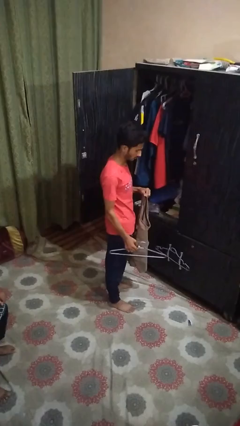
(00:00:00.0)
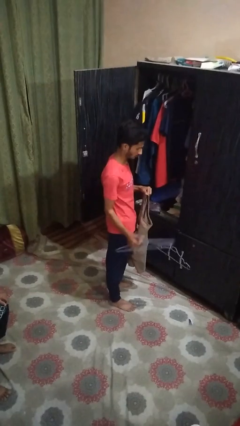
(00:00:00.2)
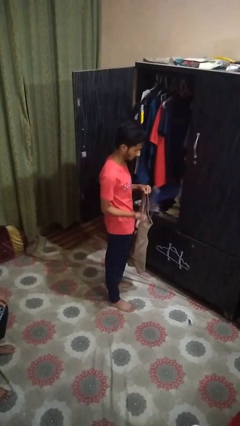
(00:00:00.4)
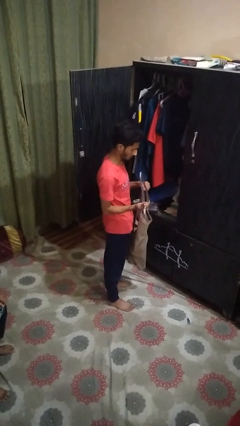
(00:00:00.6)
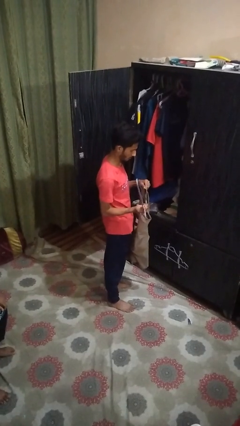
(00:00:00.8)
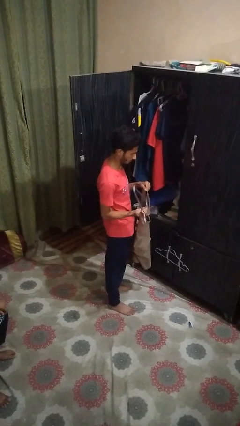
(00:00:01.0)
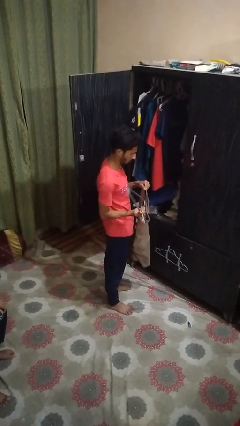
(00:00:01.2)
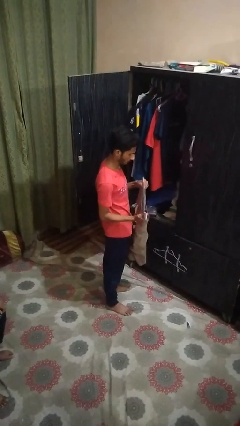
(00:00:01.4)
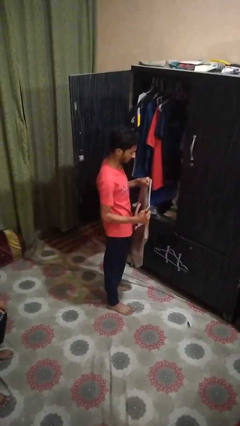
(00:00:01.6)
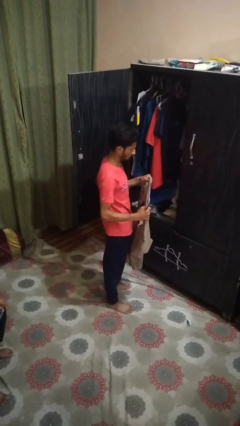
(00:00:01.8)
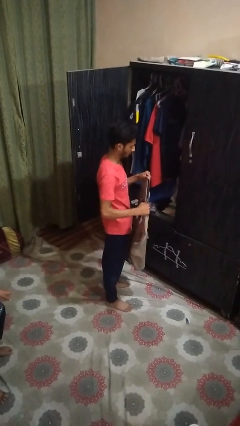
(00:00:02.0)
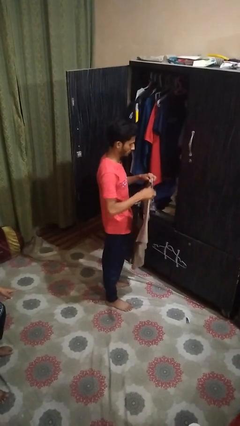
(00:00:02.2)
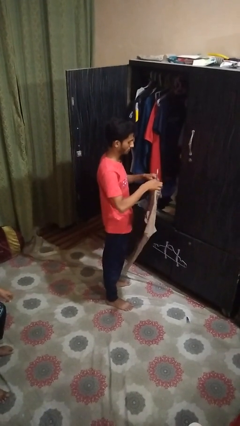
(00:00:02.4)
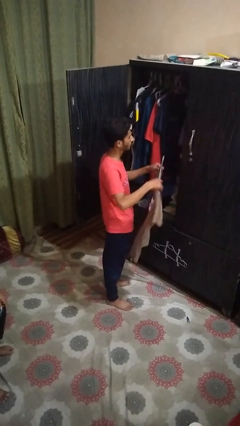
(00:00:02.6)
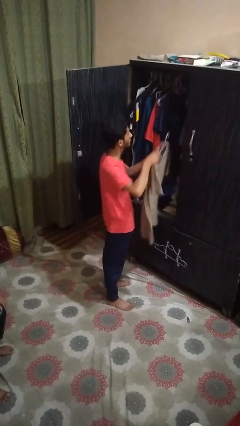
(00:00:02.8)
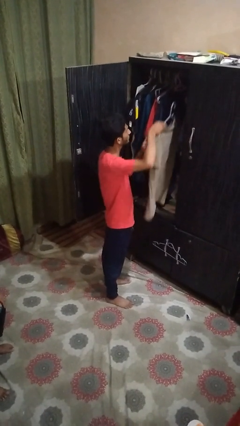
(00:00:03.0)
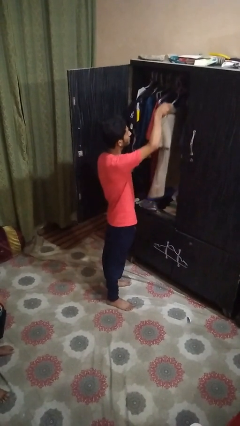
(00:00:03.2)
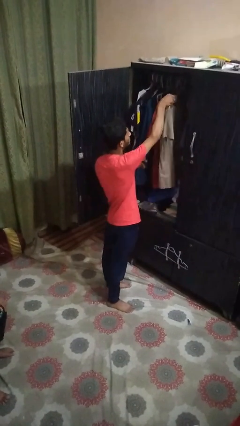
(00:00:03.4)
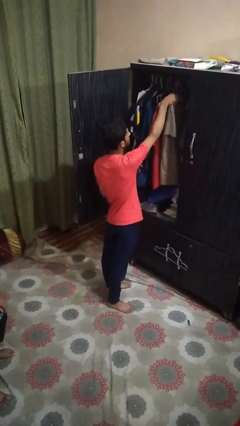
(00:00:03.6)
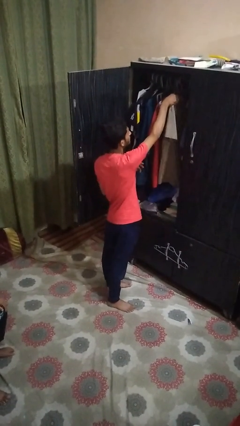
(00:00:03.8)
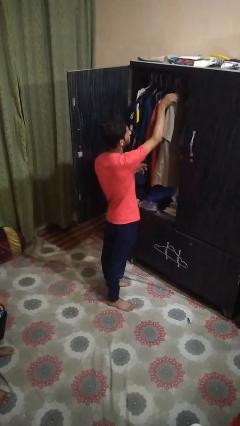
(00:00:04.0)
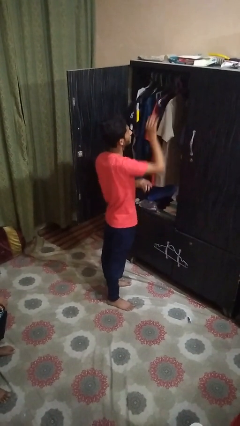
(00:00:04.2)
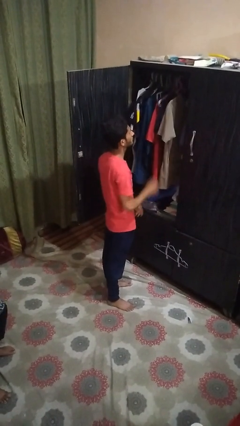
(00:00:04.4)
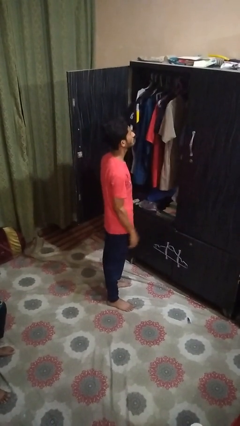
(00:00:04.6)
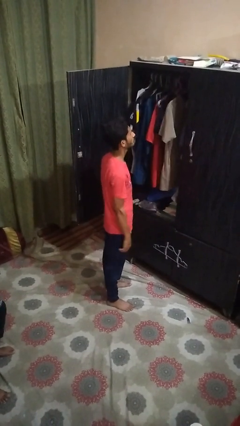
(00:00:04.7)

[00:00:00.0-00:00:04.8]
person puts clothes into closet

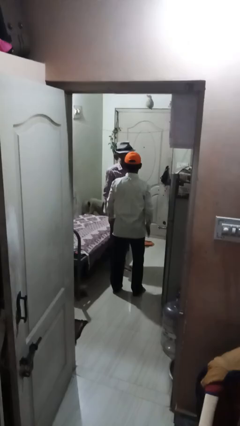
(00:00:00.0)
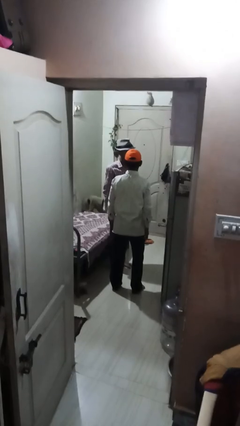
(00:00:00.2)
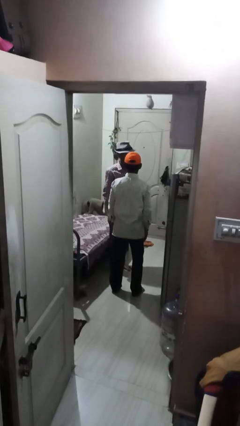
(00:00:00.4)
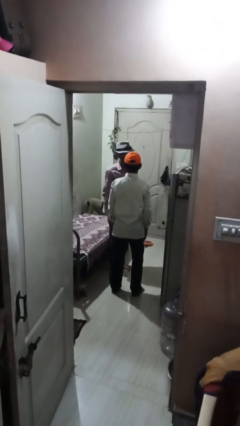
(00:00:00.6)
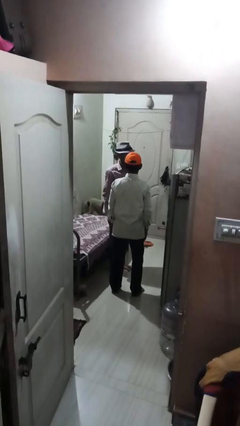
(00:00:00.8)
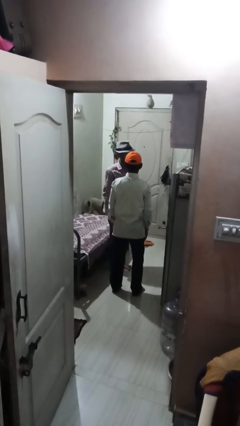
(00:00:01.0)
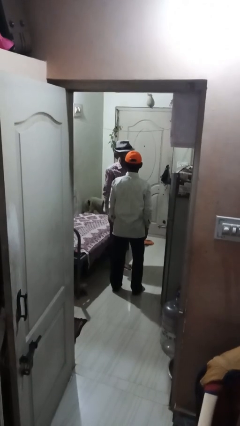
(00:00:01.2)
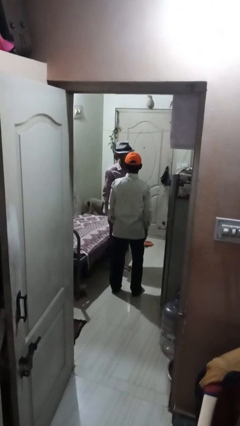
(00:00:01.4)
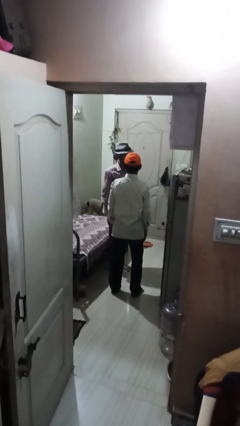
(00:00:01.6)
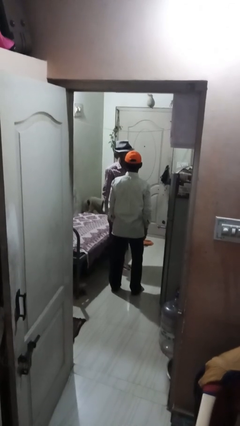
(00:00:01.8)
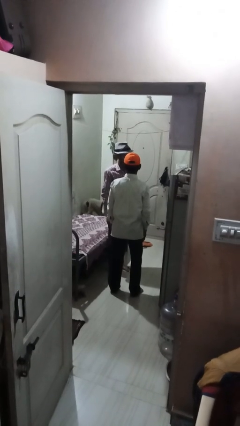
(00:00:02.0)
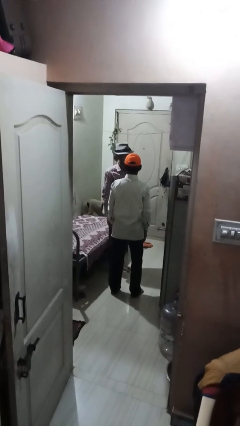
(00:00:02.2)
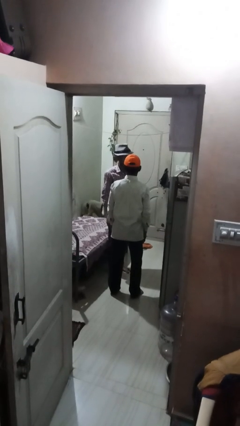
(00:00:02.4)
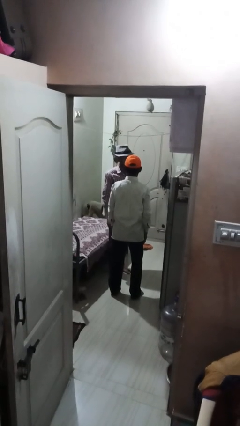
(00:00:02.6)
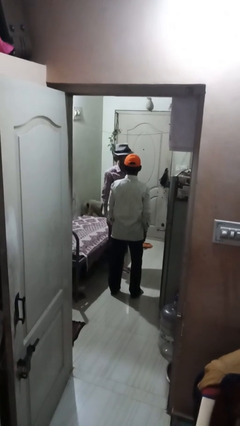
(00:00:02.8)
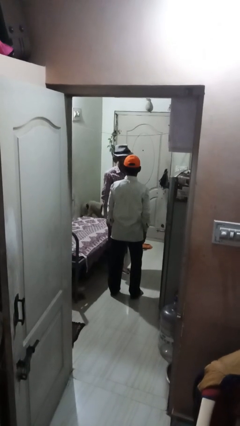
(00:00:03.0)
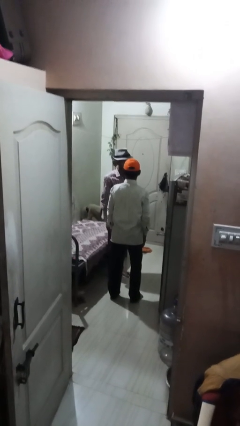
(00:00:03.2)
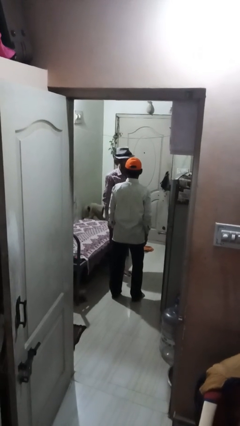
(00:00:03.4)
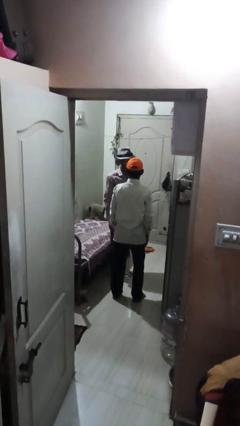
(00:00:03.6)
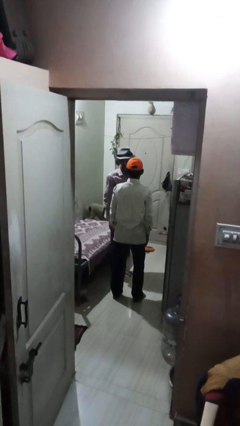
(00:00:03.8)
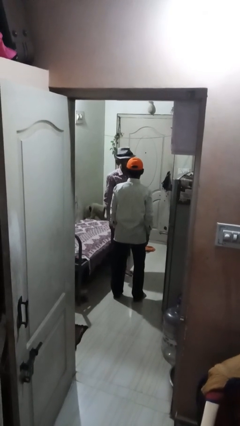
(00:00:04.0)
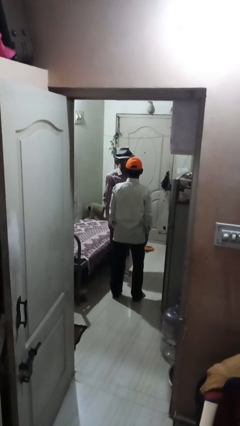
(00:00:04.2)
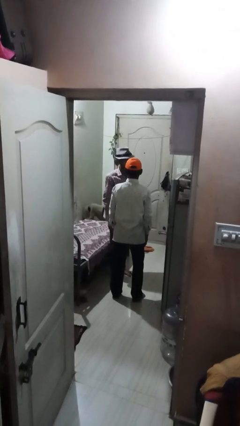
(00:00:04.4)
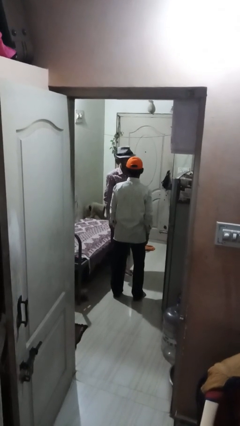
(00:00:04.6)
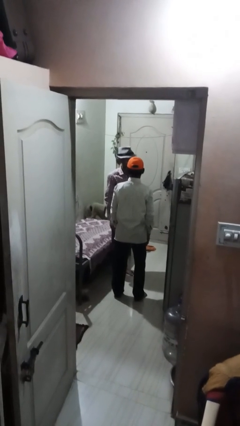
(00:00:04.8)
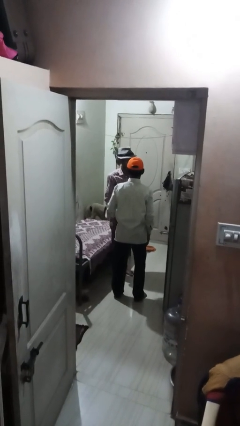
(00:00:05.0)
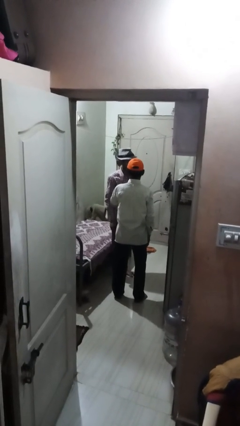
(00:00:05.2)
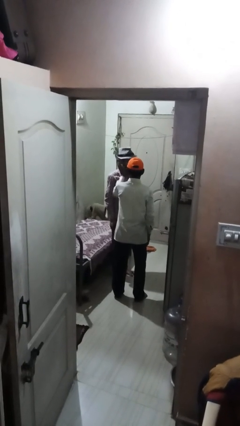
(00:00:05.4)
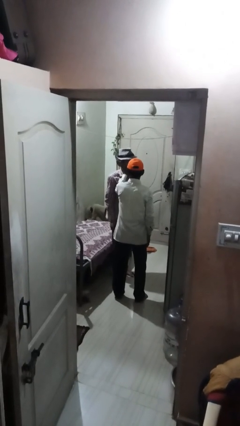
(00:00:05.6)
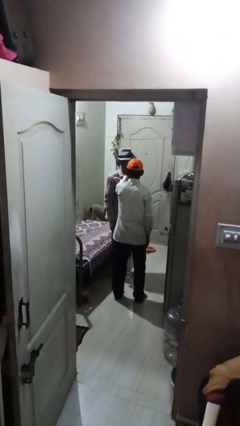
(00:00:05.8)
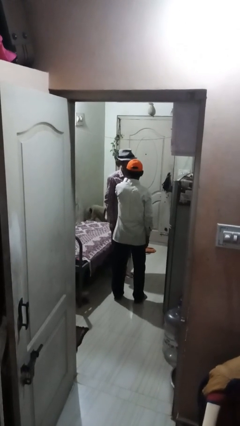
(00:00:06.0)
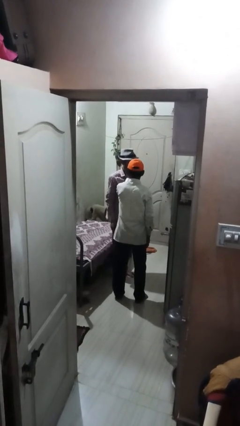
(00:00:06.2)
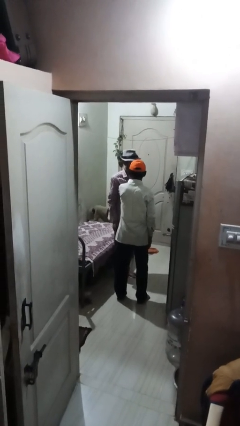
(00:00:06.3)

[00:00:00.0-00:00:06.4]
person touches face of person

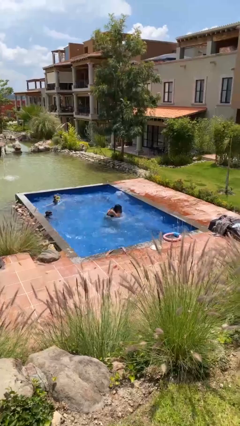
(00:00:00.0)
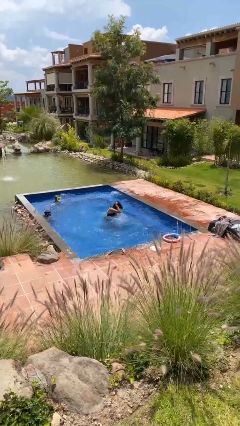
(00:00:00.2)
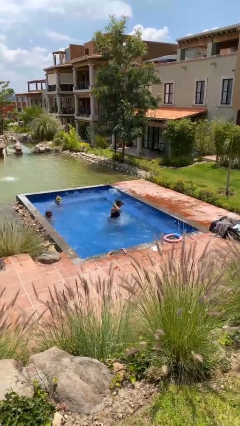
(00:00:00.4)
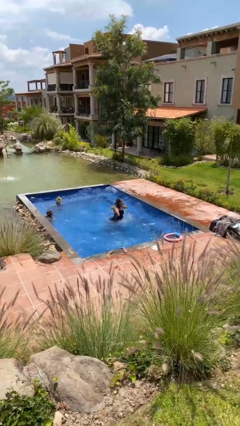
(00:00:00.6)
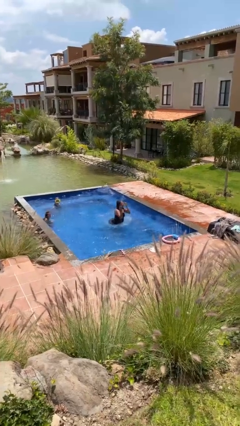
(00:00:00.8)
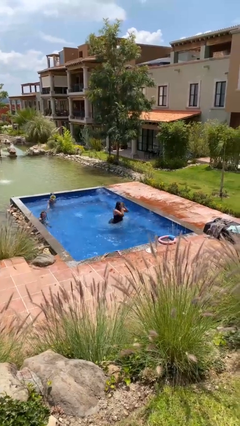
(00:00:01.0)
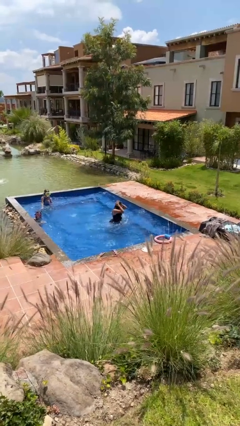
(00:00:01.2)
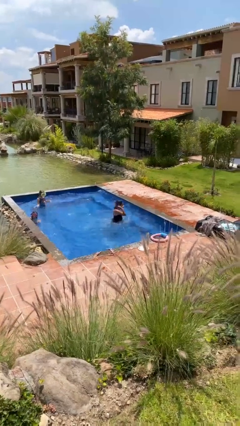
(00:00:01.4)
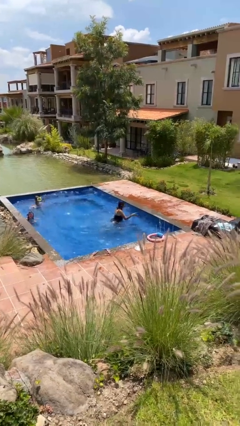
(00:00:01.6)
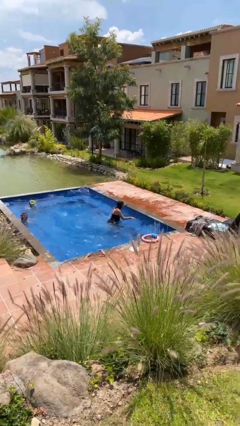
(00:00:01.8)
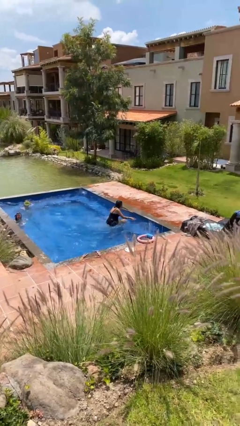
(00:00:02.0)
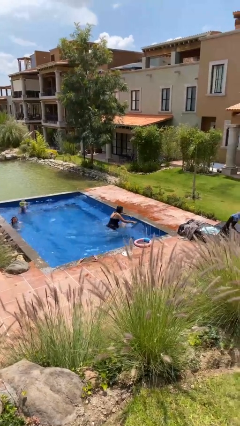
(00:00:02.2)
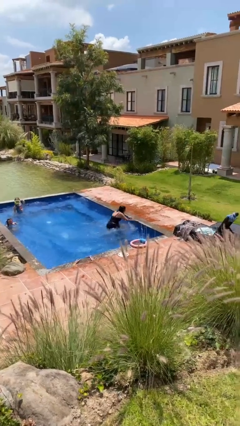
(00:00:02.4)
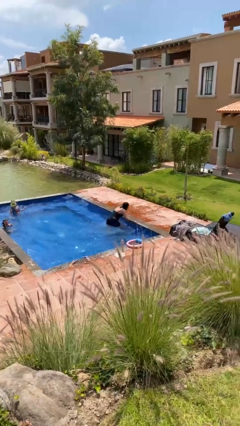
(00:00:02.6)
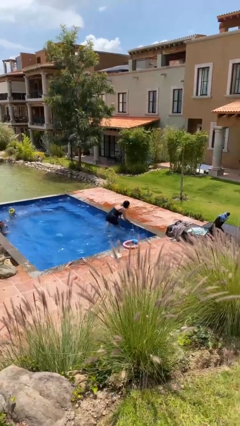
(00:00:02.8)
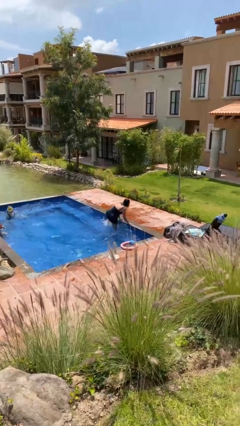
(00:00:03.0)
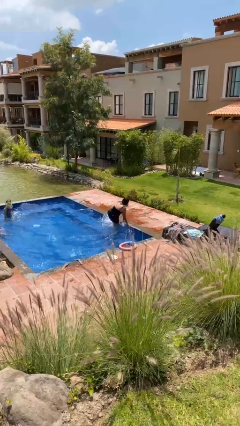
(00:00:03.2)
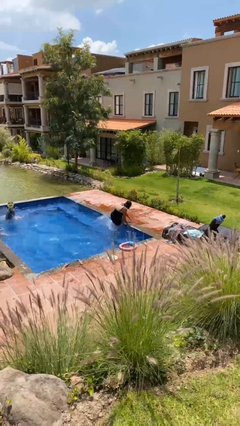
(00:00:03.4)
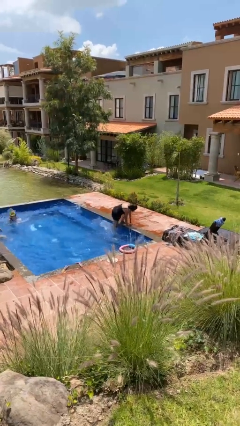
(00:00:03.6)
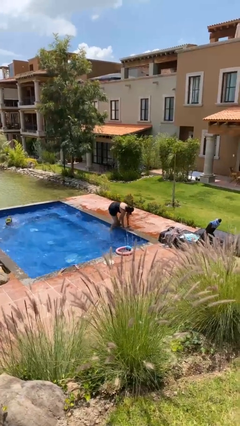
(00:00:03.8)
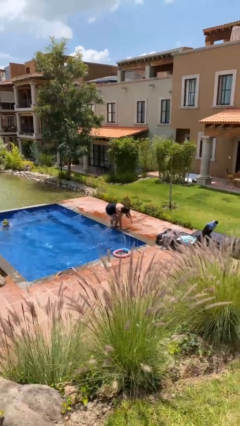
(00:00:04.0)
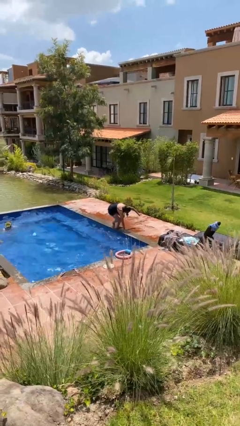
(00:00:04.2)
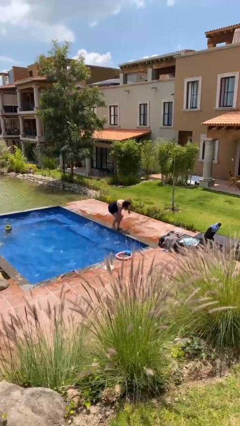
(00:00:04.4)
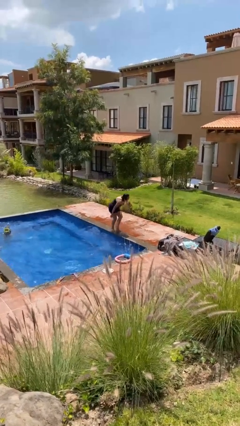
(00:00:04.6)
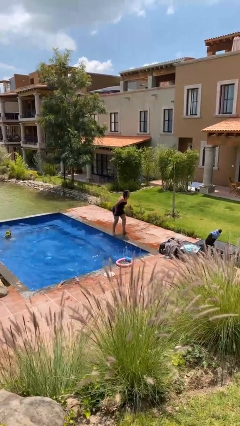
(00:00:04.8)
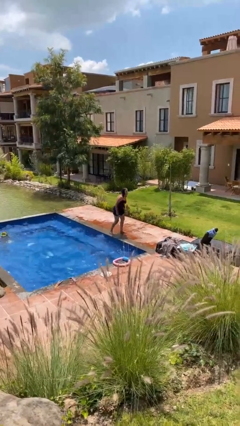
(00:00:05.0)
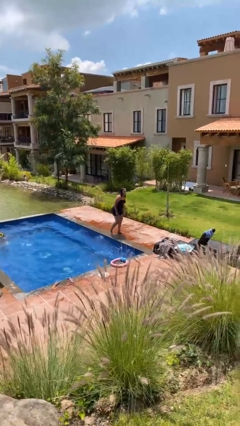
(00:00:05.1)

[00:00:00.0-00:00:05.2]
person exits pool

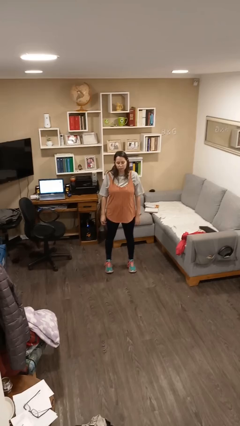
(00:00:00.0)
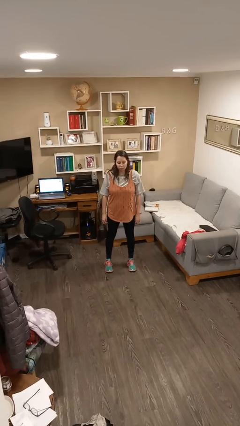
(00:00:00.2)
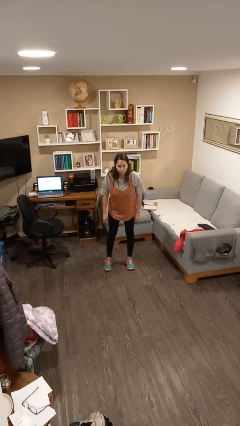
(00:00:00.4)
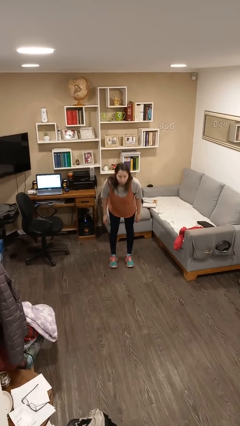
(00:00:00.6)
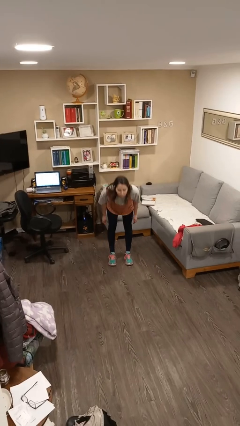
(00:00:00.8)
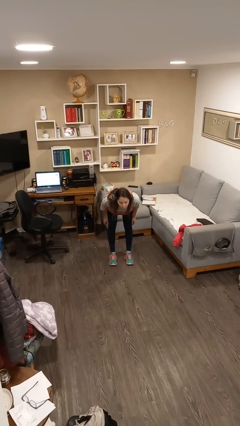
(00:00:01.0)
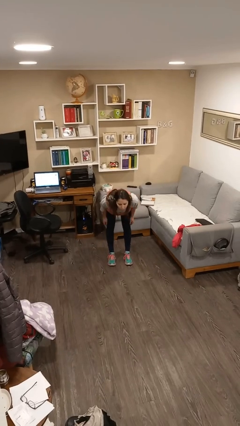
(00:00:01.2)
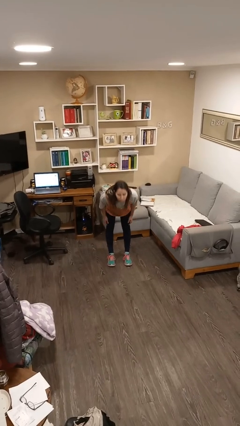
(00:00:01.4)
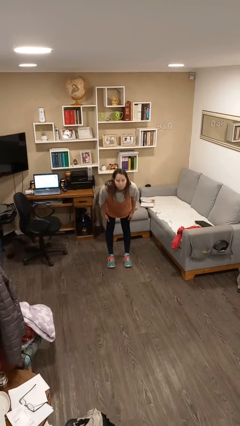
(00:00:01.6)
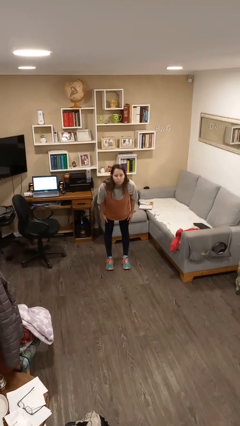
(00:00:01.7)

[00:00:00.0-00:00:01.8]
person bows
